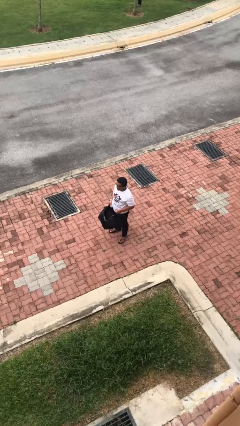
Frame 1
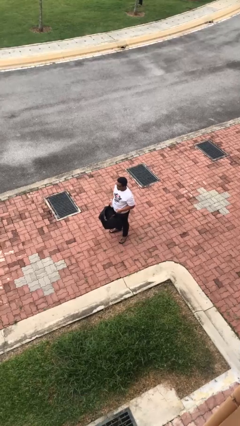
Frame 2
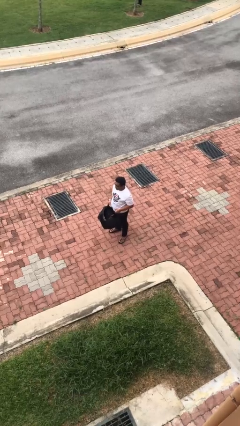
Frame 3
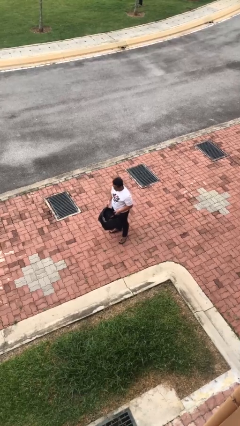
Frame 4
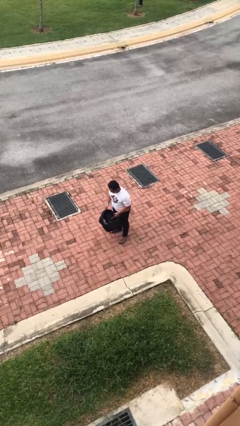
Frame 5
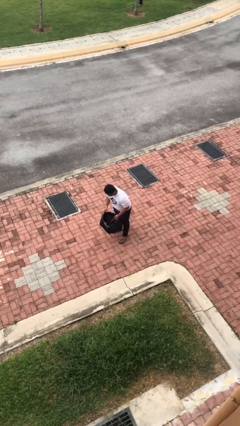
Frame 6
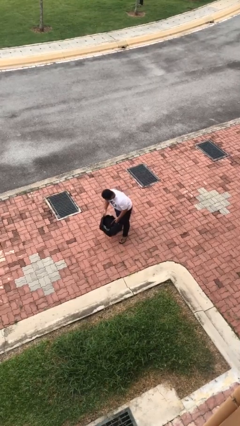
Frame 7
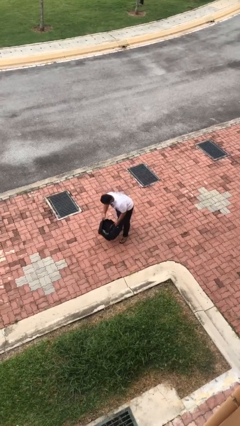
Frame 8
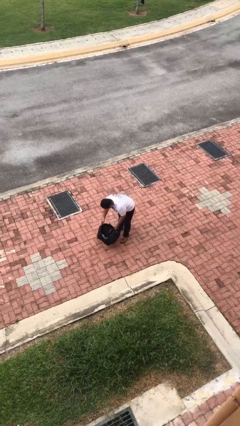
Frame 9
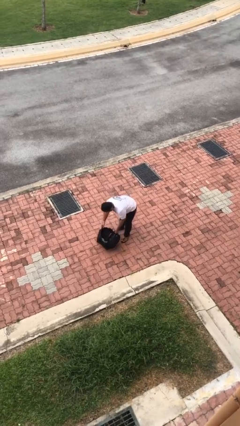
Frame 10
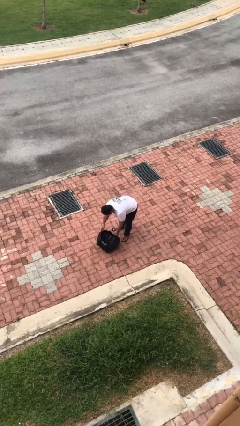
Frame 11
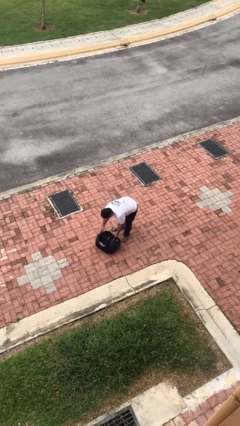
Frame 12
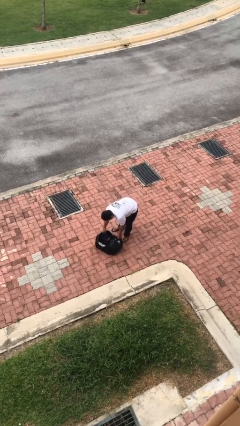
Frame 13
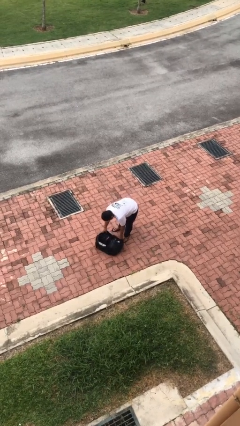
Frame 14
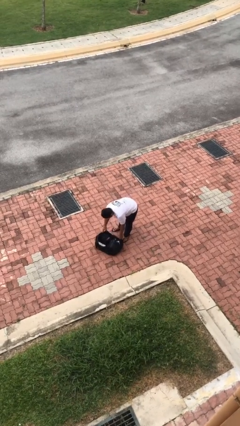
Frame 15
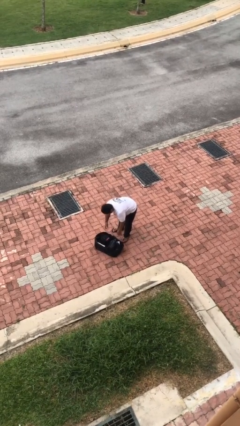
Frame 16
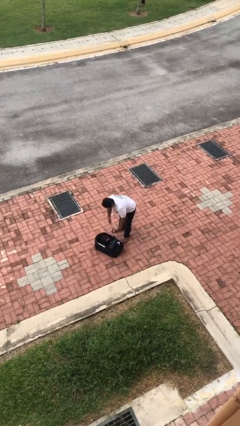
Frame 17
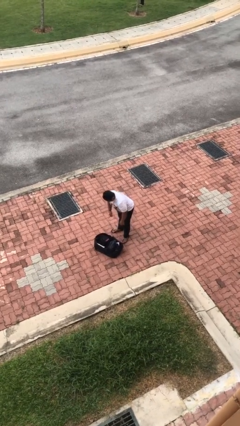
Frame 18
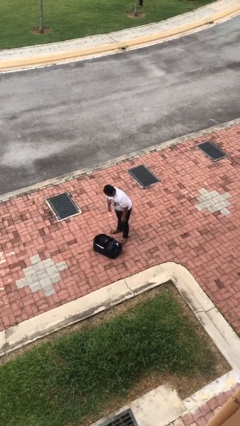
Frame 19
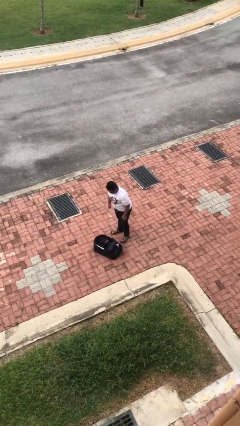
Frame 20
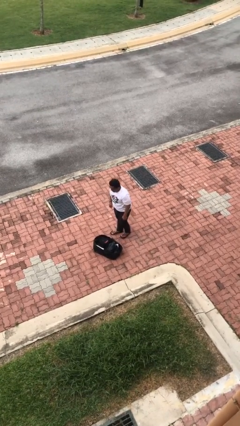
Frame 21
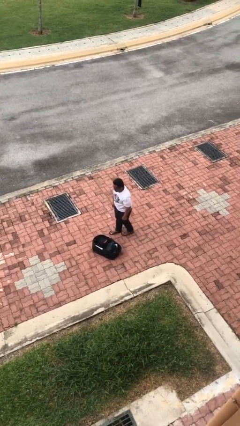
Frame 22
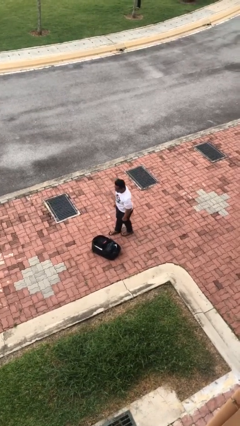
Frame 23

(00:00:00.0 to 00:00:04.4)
person puts down object on floor

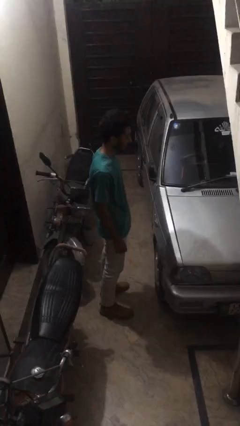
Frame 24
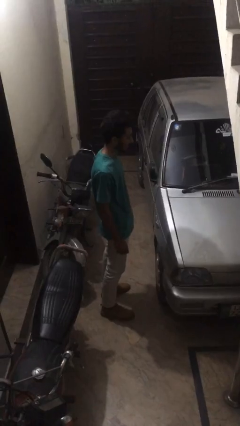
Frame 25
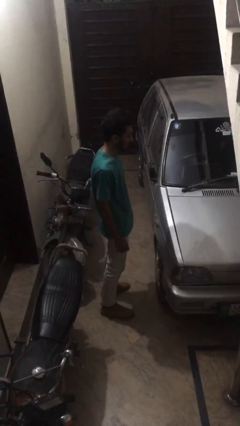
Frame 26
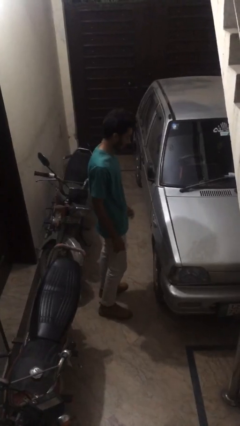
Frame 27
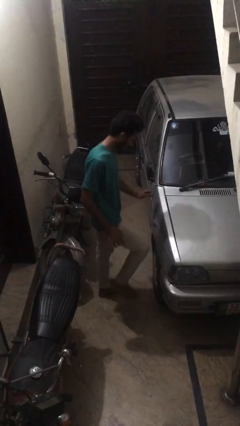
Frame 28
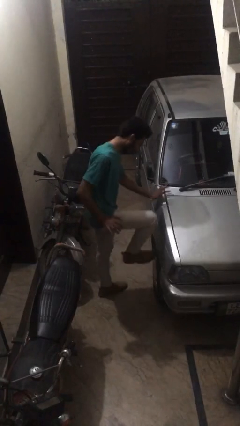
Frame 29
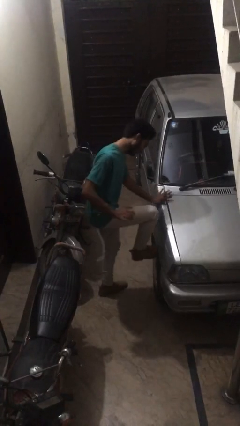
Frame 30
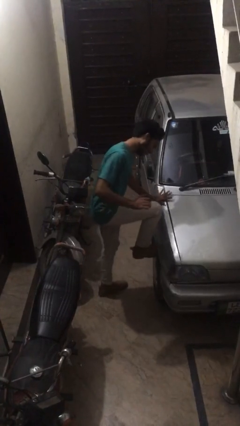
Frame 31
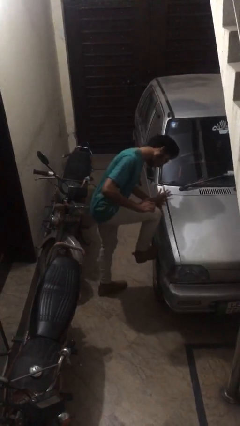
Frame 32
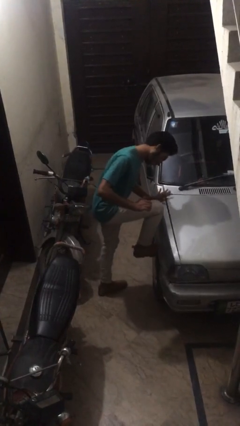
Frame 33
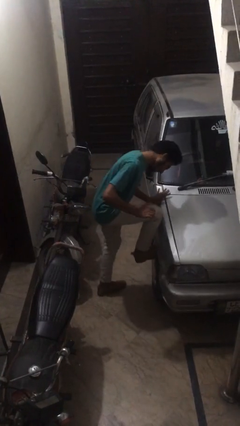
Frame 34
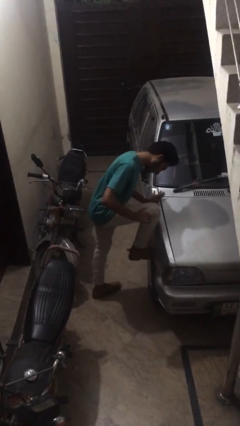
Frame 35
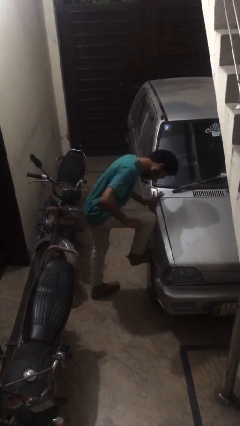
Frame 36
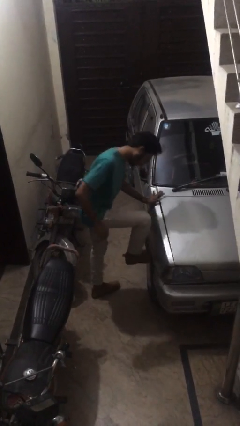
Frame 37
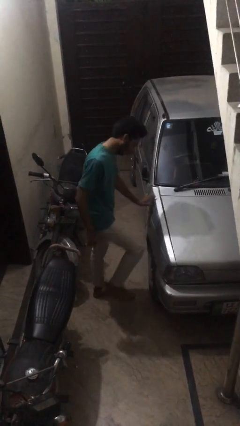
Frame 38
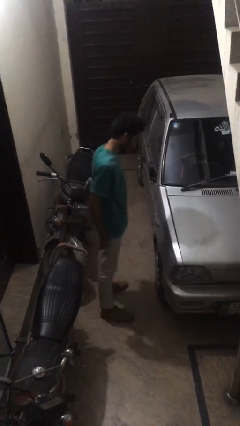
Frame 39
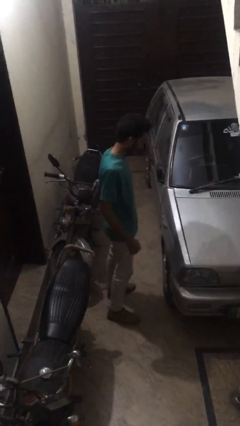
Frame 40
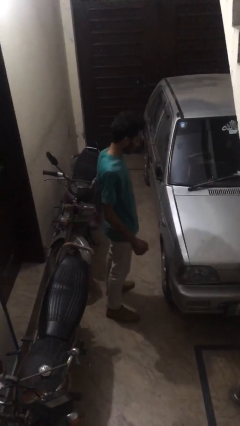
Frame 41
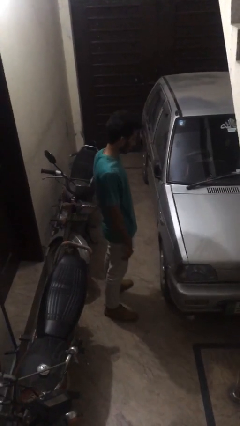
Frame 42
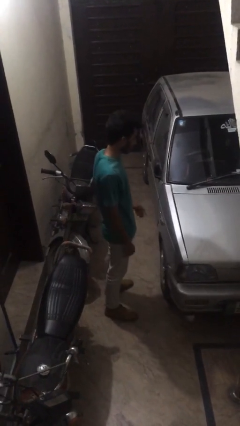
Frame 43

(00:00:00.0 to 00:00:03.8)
person kicks car tires

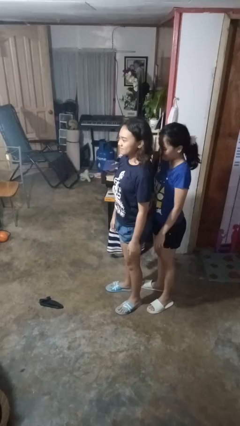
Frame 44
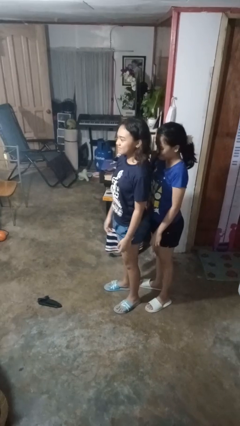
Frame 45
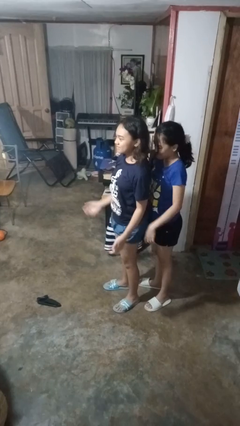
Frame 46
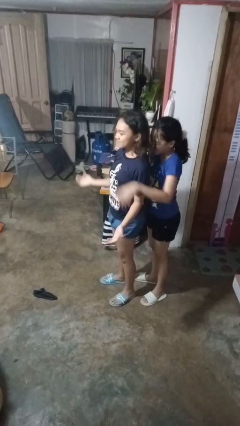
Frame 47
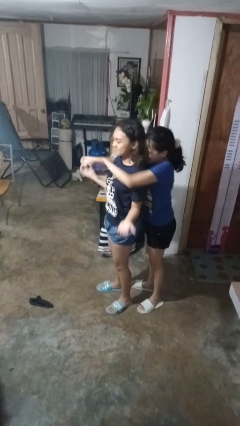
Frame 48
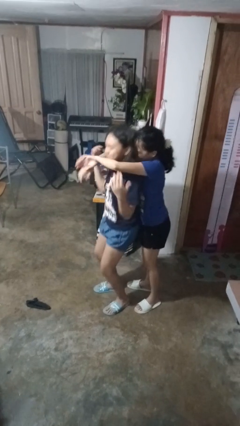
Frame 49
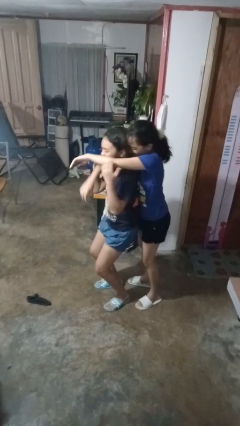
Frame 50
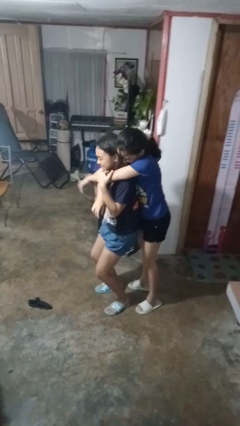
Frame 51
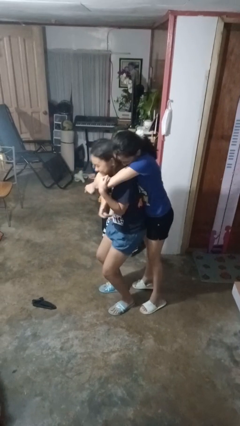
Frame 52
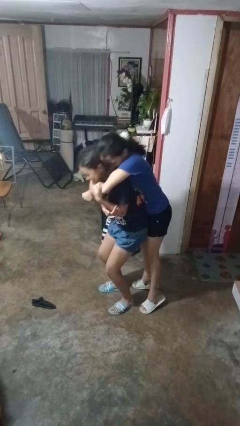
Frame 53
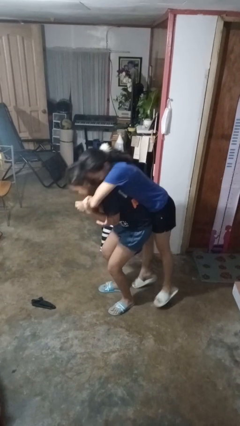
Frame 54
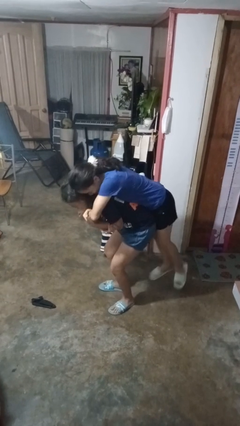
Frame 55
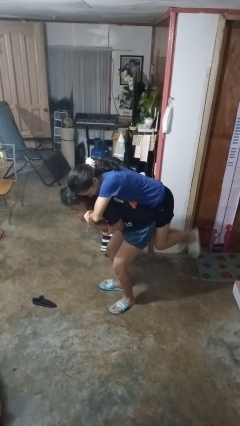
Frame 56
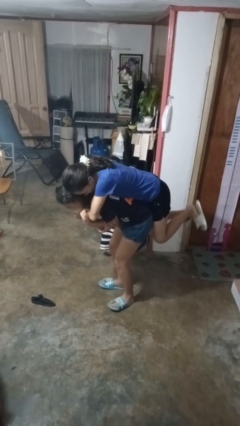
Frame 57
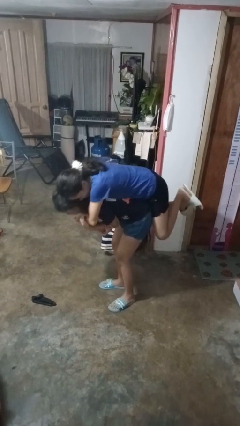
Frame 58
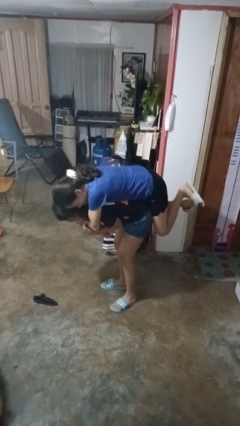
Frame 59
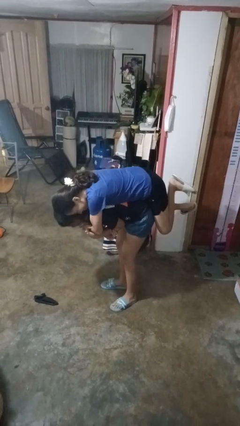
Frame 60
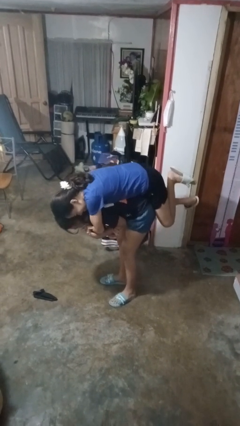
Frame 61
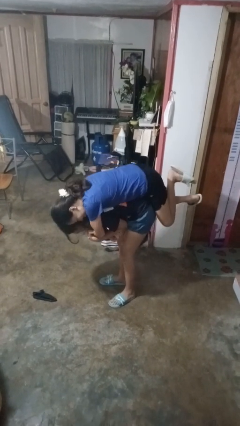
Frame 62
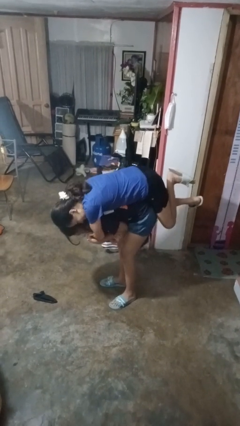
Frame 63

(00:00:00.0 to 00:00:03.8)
person picks up person

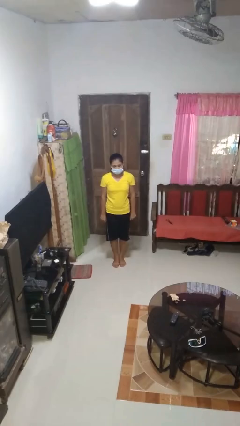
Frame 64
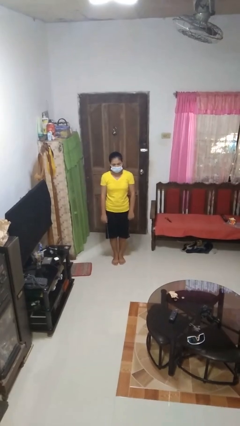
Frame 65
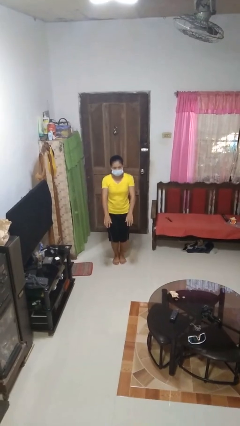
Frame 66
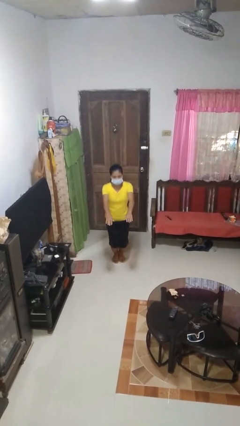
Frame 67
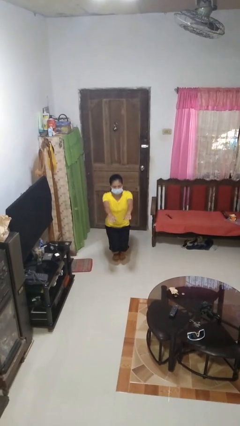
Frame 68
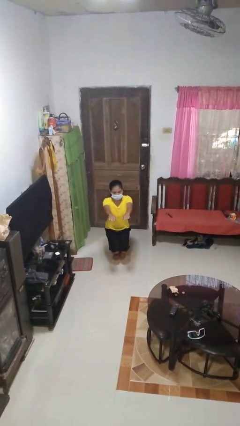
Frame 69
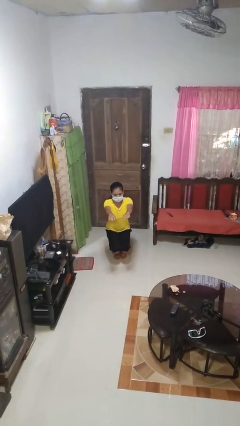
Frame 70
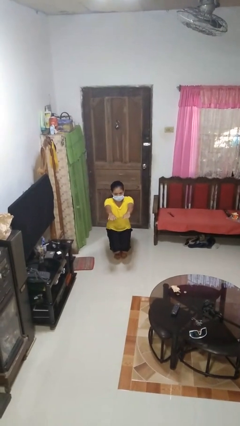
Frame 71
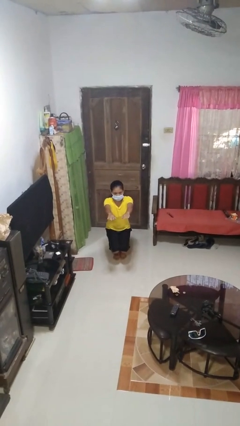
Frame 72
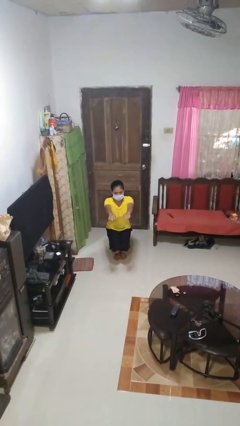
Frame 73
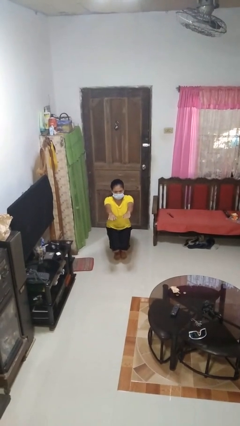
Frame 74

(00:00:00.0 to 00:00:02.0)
person squats

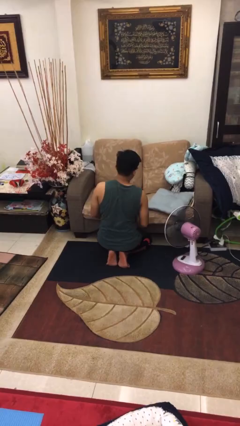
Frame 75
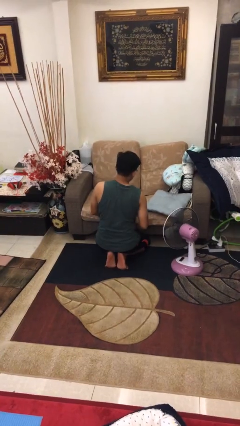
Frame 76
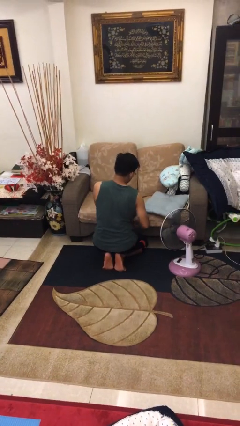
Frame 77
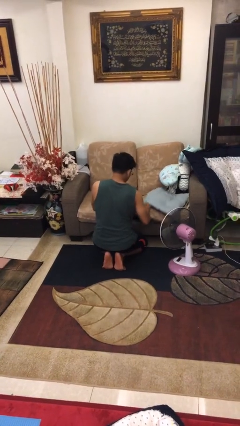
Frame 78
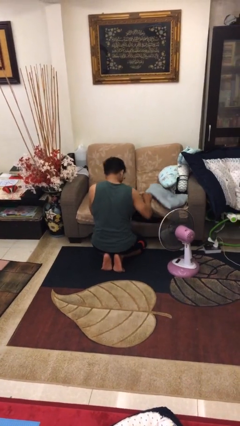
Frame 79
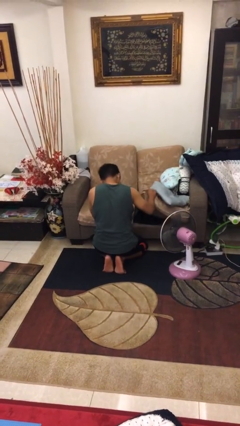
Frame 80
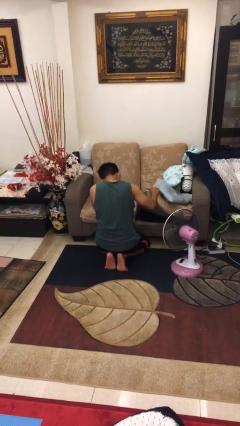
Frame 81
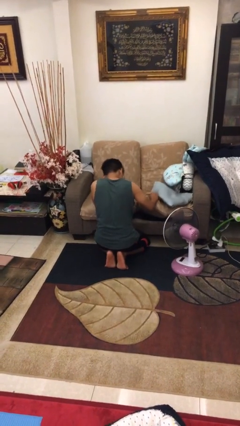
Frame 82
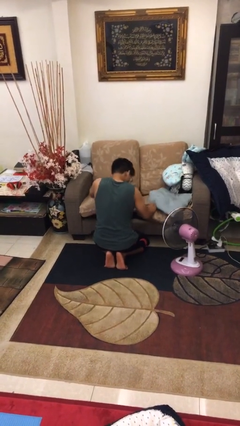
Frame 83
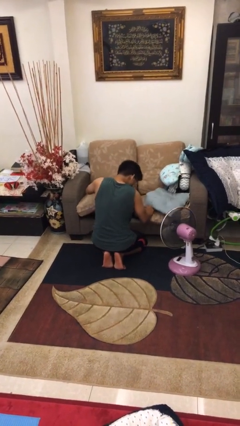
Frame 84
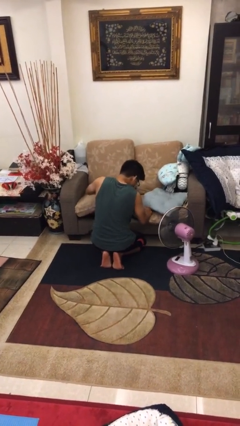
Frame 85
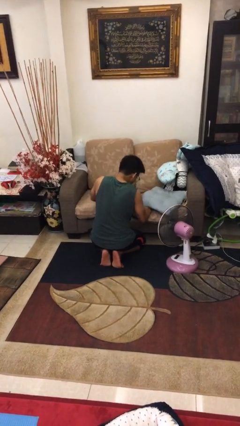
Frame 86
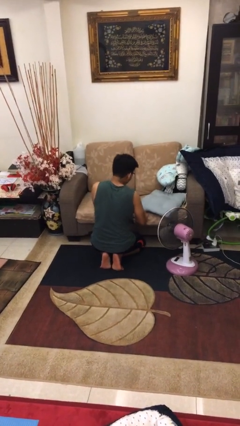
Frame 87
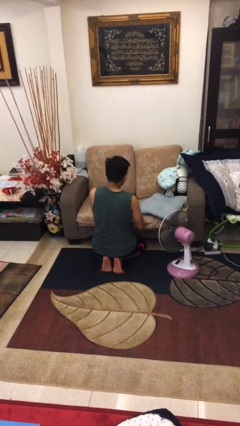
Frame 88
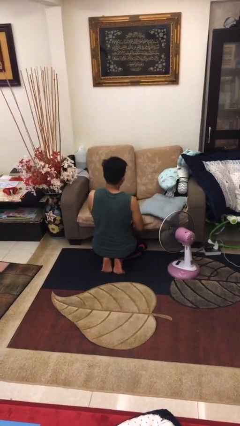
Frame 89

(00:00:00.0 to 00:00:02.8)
person searches in couch

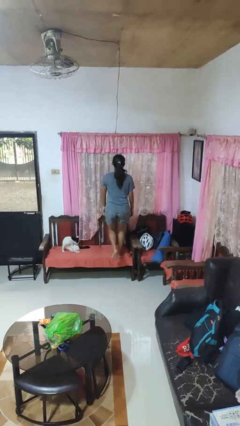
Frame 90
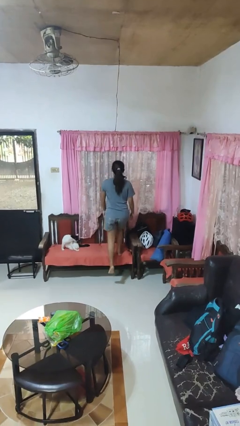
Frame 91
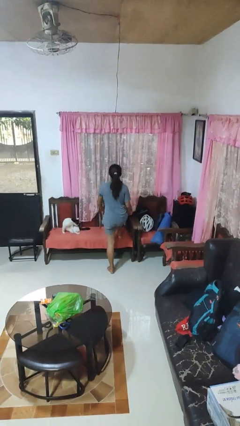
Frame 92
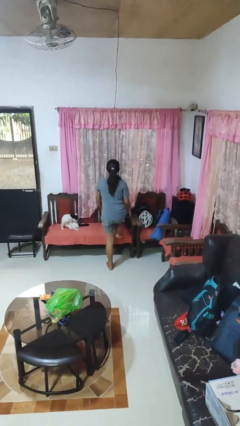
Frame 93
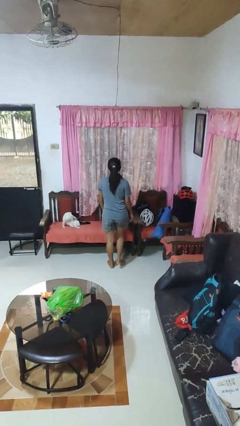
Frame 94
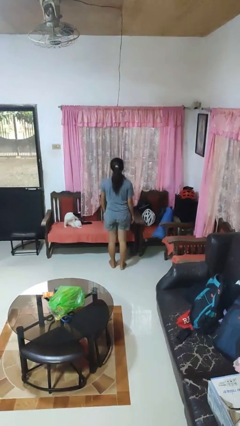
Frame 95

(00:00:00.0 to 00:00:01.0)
person climbs off chair

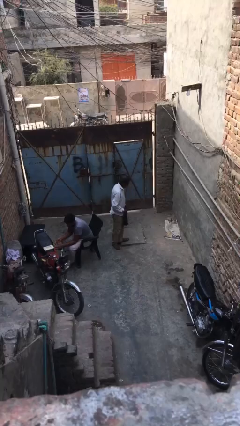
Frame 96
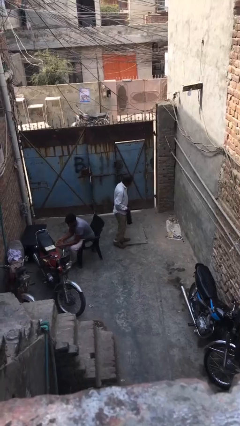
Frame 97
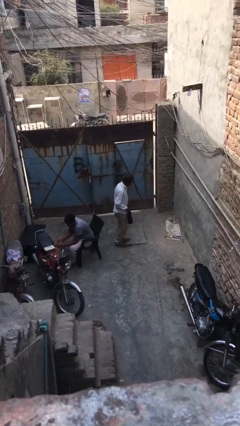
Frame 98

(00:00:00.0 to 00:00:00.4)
person steals object from person
